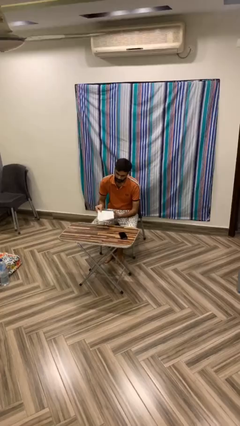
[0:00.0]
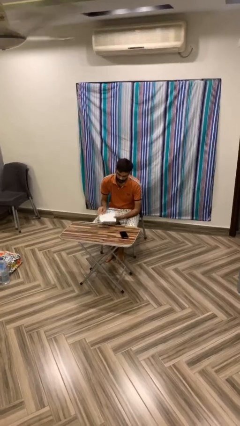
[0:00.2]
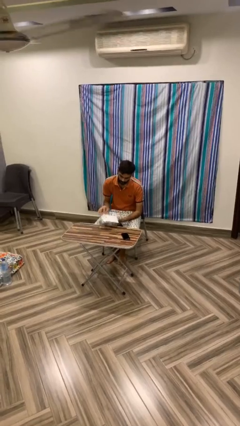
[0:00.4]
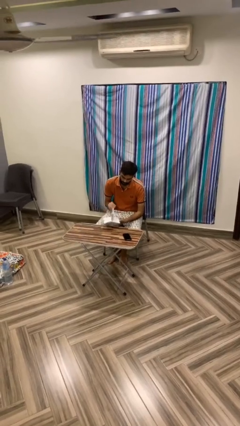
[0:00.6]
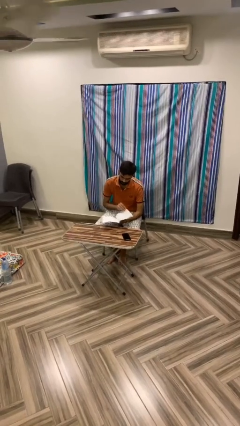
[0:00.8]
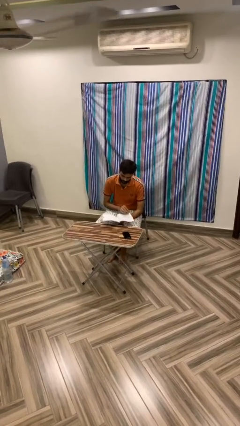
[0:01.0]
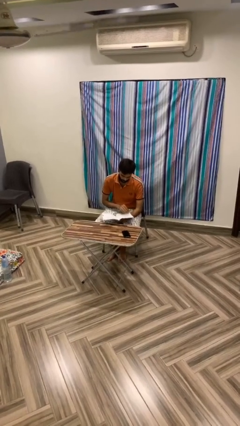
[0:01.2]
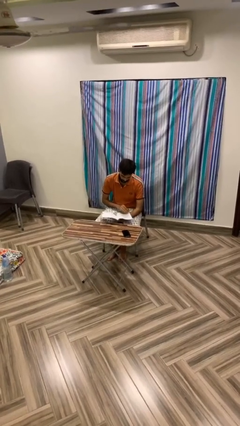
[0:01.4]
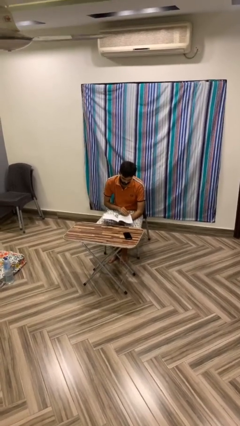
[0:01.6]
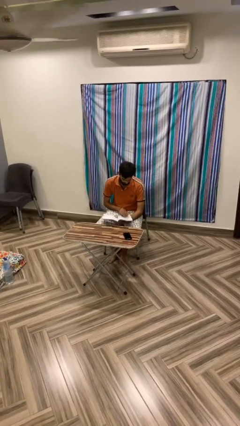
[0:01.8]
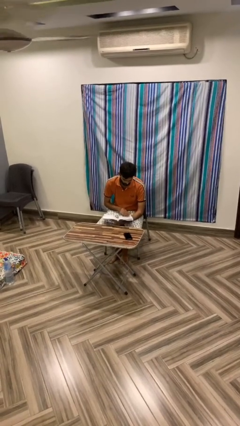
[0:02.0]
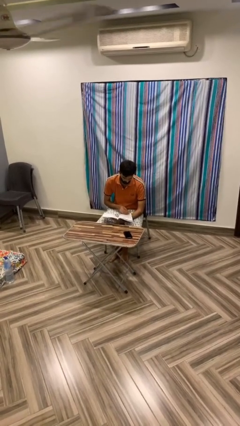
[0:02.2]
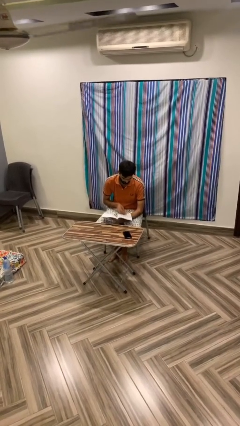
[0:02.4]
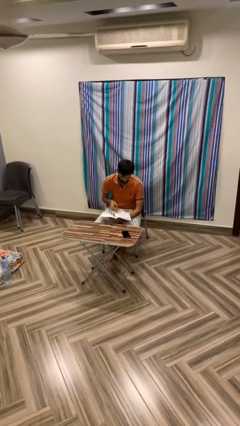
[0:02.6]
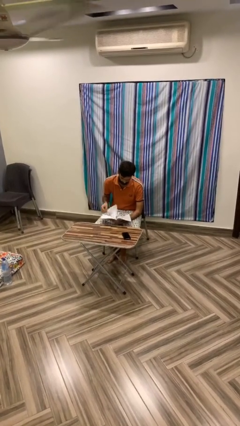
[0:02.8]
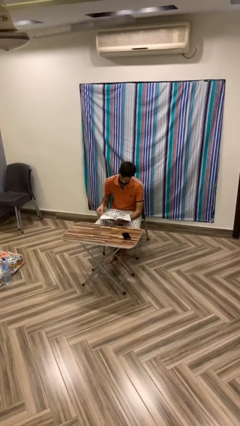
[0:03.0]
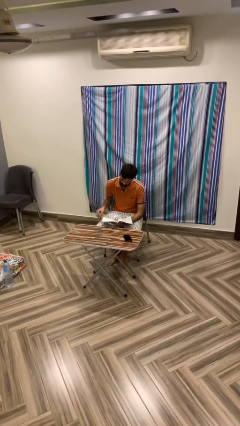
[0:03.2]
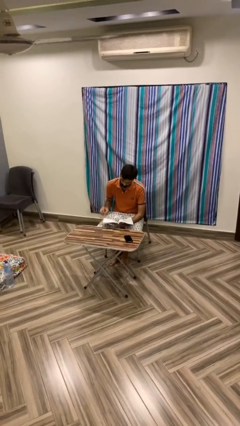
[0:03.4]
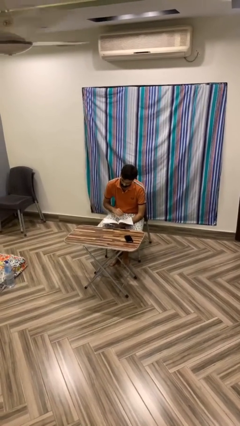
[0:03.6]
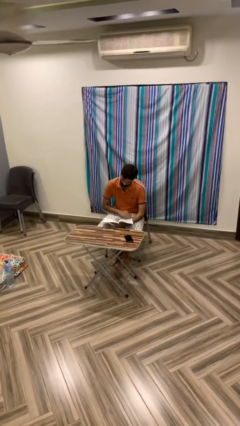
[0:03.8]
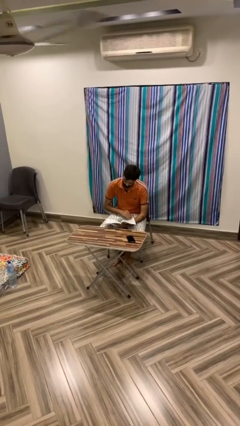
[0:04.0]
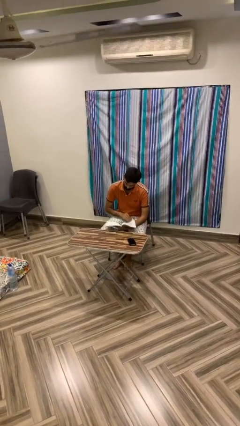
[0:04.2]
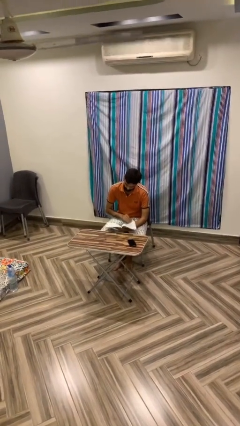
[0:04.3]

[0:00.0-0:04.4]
person reads document

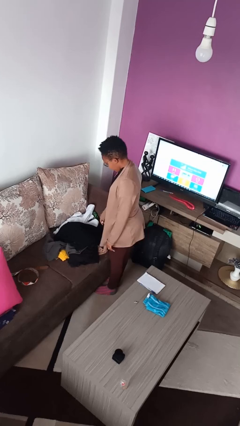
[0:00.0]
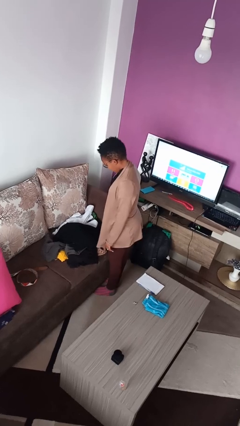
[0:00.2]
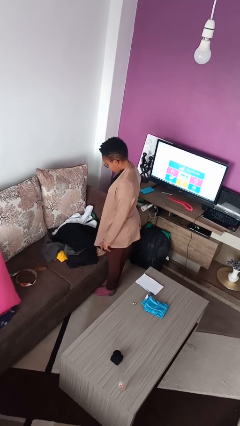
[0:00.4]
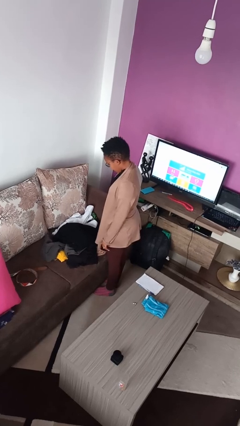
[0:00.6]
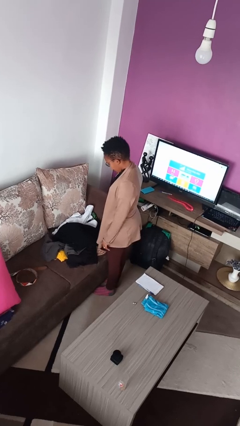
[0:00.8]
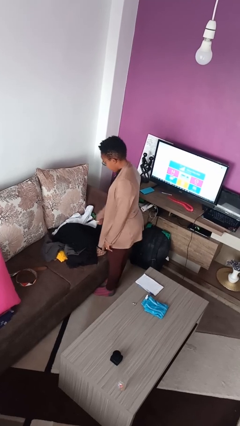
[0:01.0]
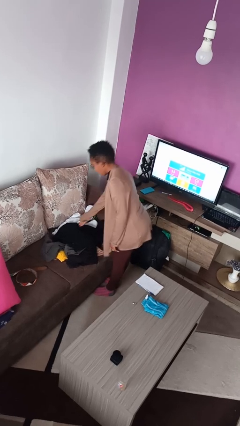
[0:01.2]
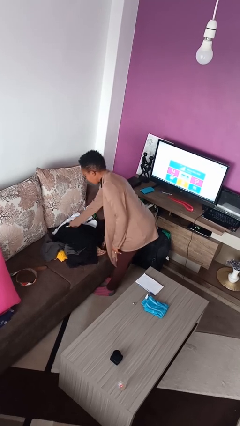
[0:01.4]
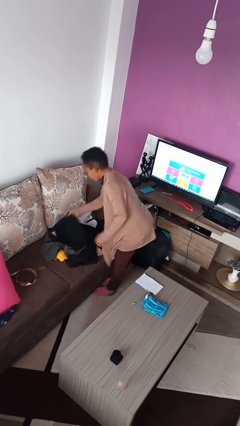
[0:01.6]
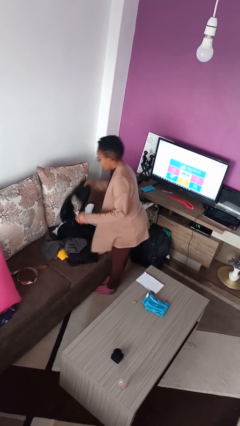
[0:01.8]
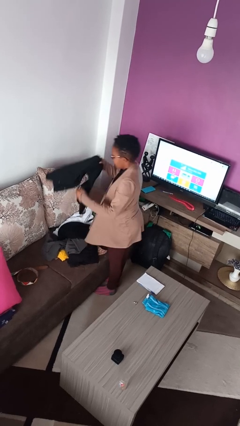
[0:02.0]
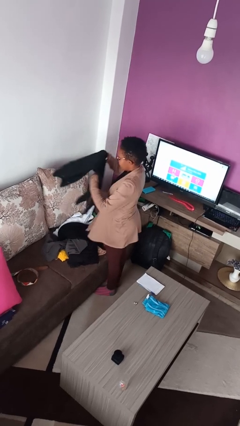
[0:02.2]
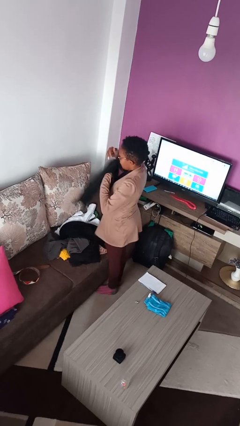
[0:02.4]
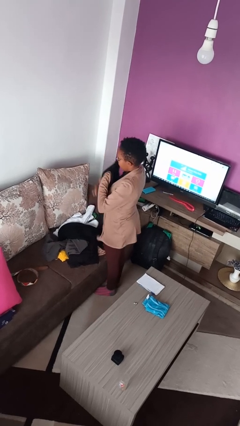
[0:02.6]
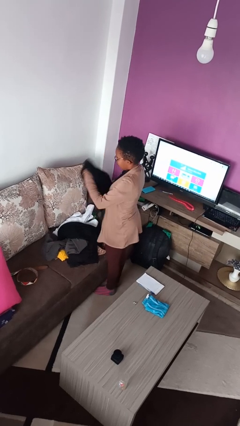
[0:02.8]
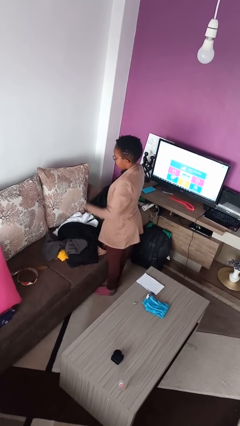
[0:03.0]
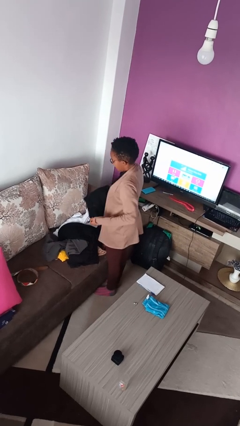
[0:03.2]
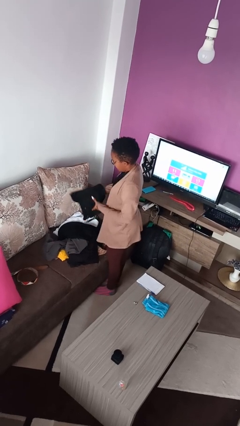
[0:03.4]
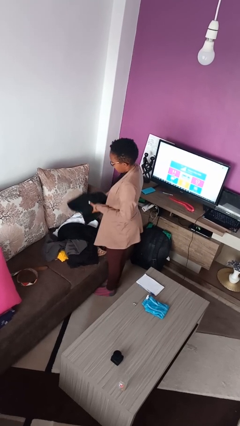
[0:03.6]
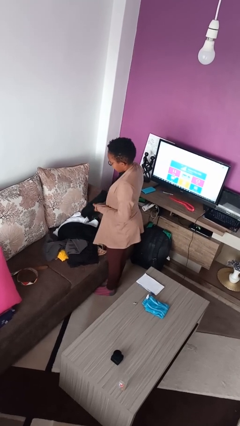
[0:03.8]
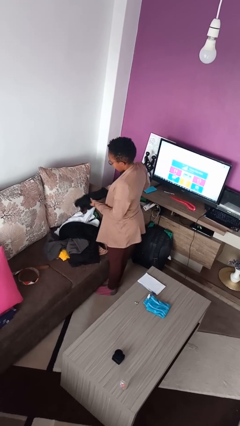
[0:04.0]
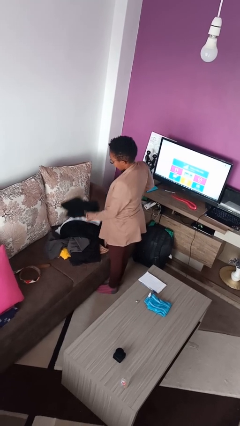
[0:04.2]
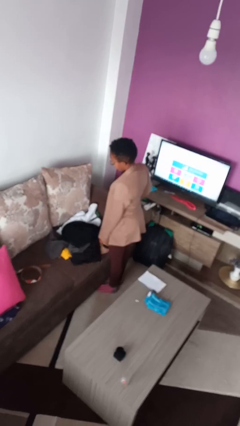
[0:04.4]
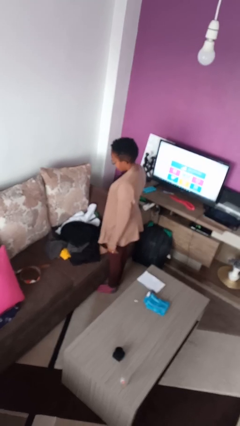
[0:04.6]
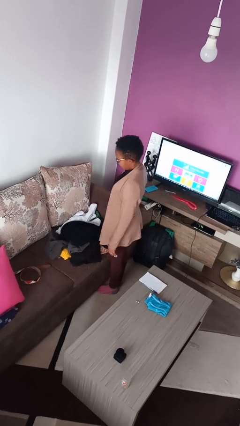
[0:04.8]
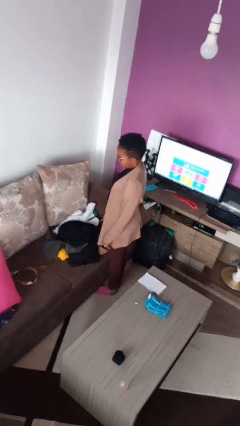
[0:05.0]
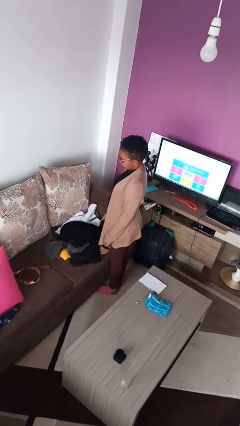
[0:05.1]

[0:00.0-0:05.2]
person folds pants

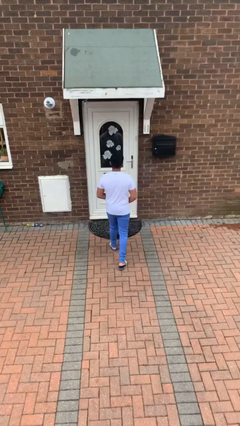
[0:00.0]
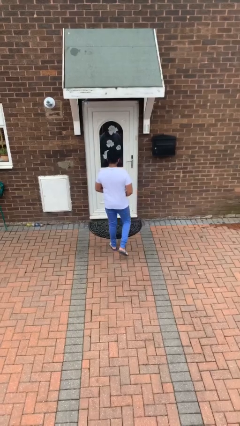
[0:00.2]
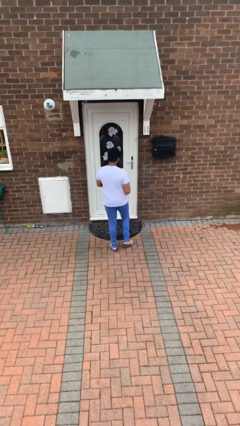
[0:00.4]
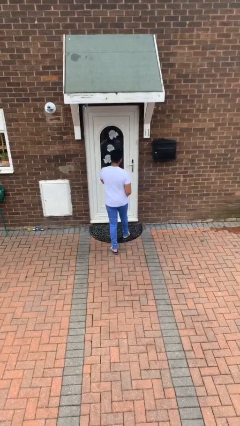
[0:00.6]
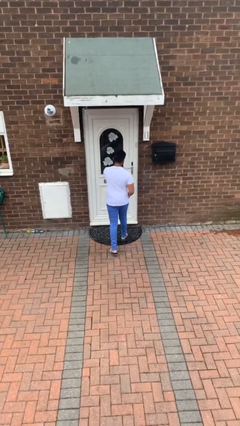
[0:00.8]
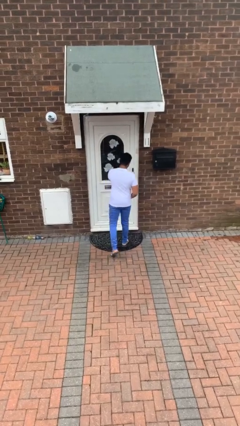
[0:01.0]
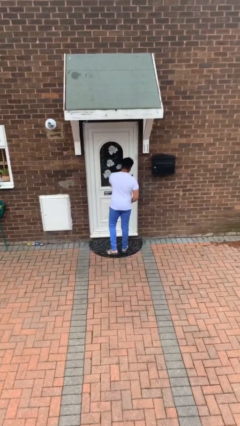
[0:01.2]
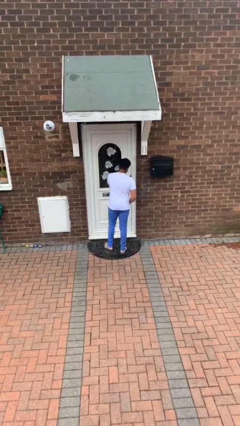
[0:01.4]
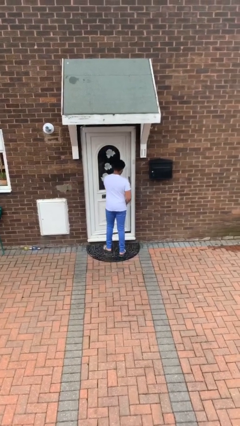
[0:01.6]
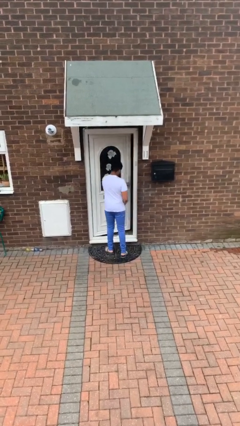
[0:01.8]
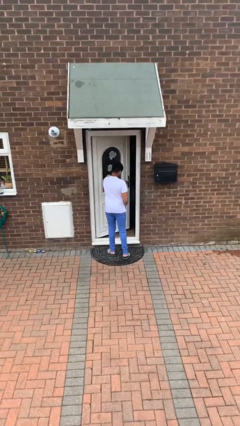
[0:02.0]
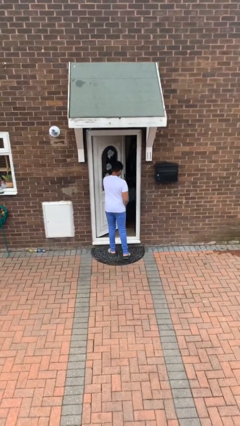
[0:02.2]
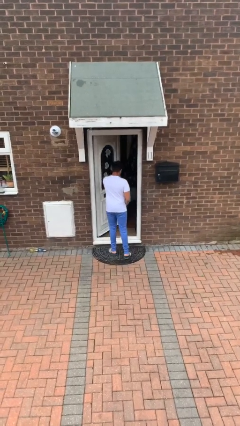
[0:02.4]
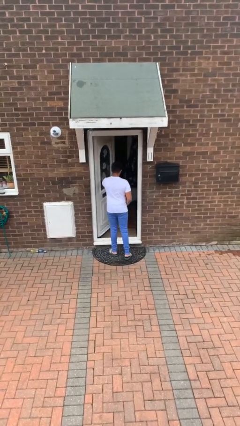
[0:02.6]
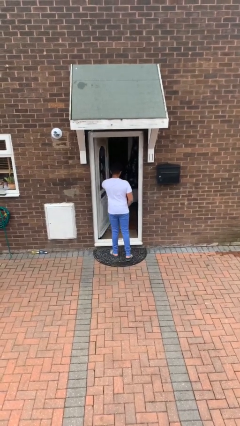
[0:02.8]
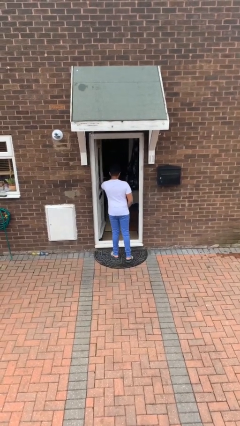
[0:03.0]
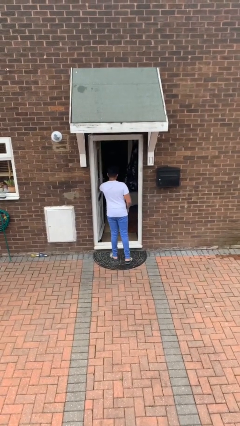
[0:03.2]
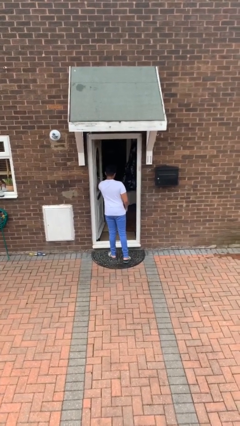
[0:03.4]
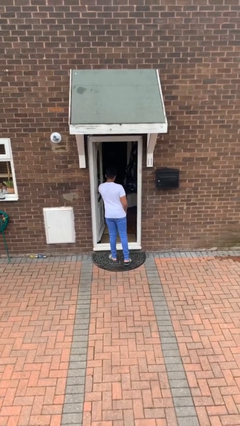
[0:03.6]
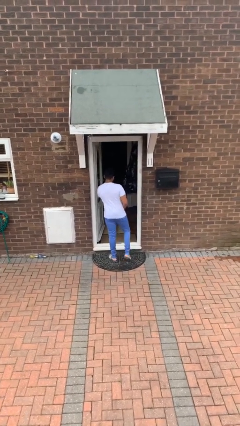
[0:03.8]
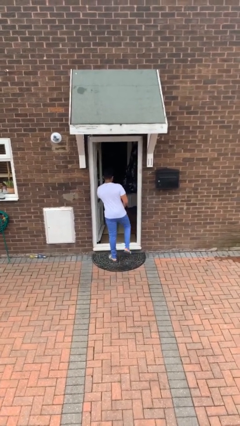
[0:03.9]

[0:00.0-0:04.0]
person opens facility door

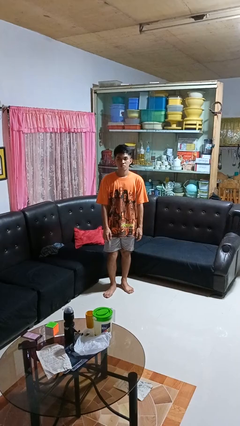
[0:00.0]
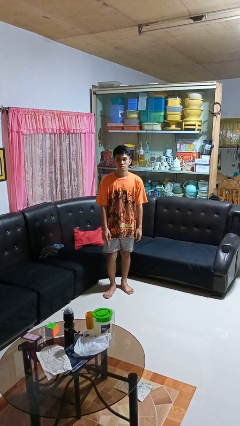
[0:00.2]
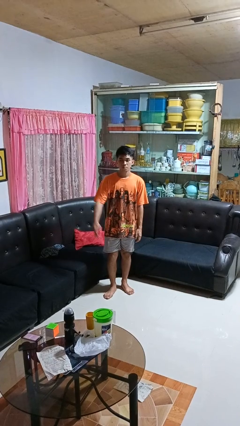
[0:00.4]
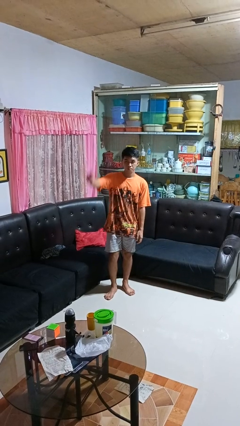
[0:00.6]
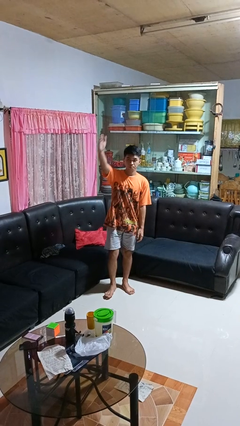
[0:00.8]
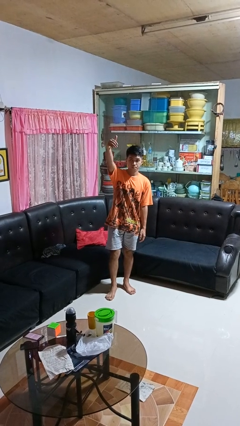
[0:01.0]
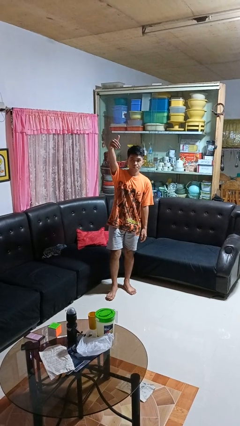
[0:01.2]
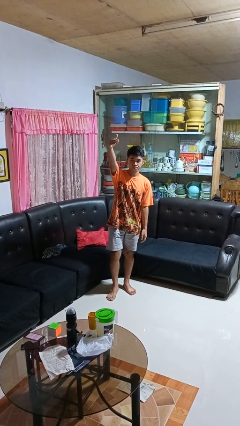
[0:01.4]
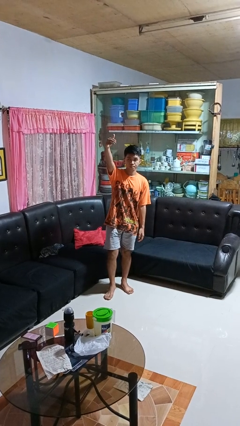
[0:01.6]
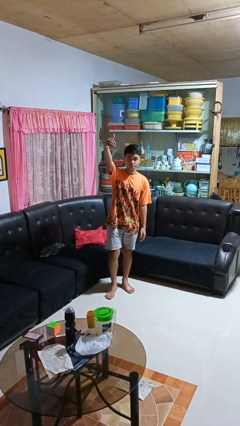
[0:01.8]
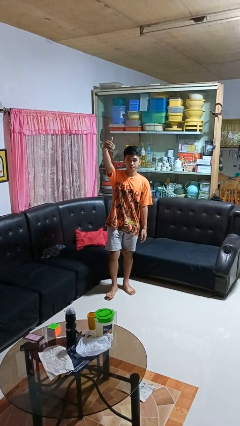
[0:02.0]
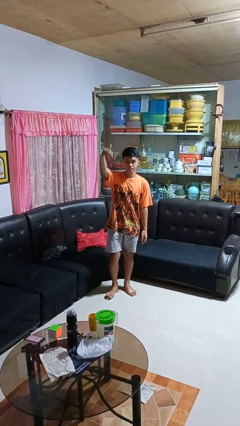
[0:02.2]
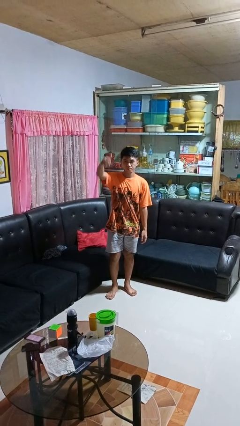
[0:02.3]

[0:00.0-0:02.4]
person gestures come here

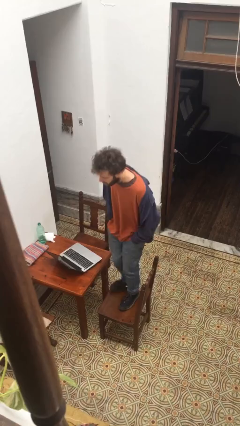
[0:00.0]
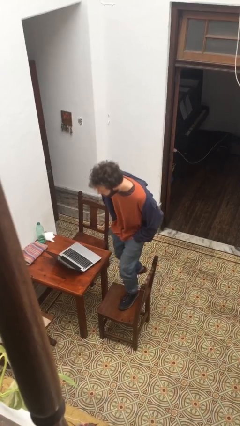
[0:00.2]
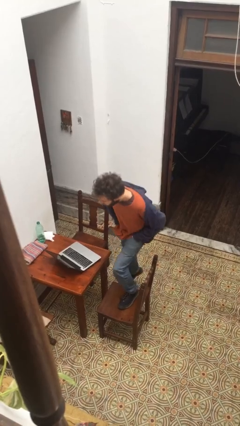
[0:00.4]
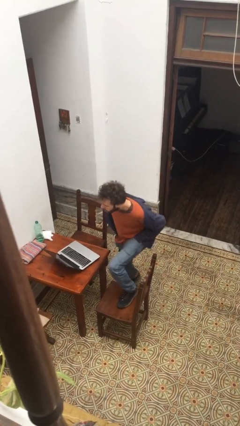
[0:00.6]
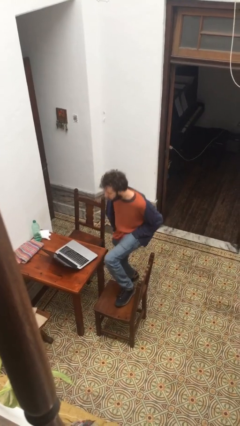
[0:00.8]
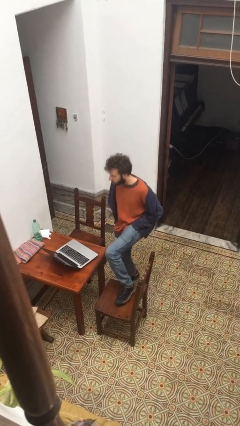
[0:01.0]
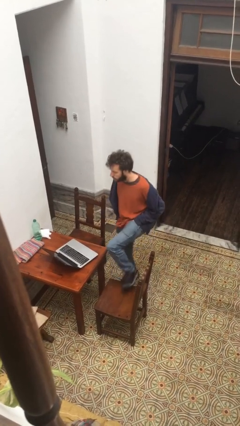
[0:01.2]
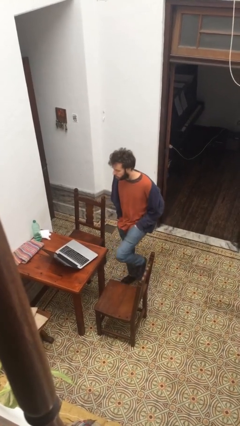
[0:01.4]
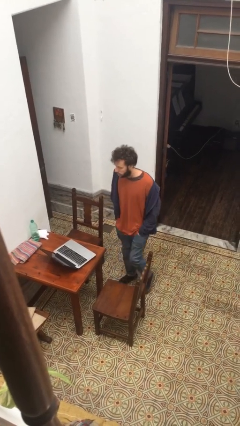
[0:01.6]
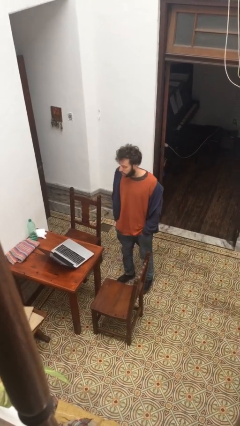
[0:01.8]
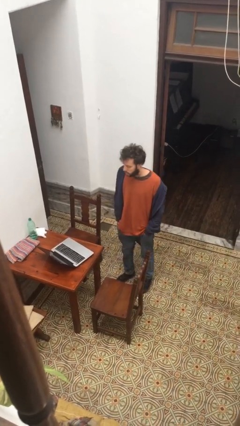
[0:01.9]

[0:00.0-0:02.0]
person climbs off chair
